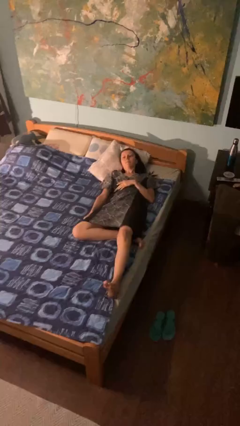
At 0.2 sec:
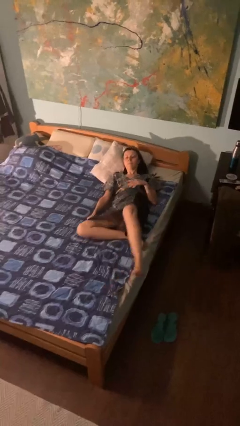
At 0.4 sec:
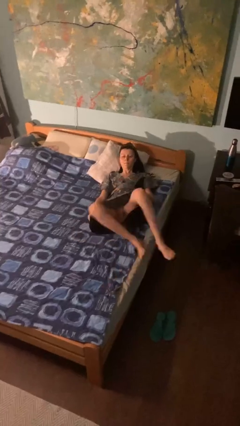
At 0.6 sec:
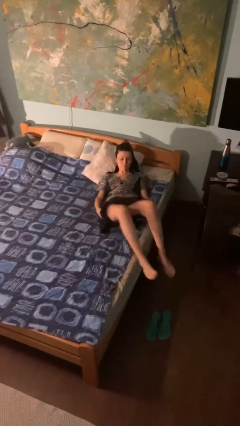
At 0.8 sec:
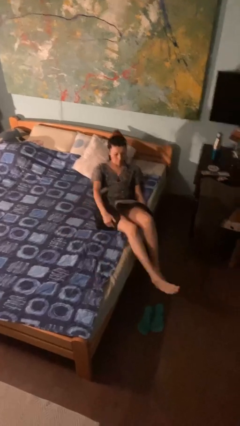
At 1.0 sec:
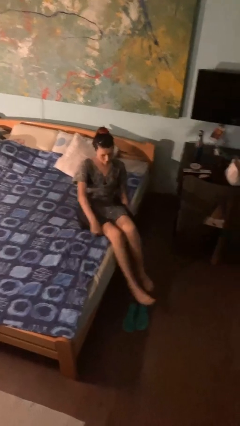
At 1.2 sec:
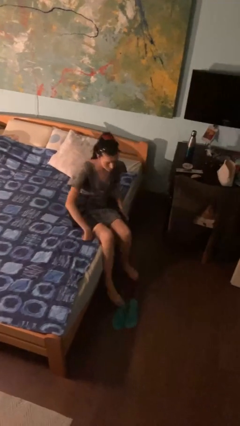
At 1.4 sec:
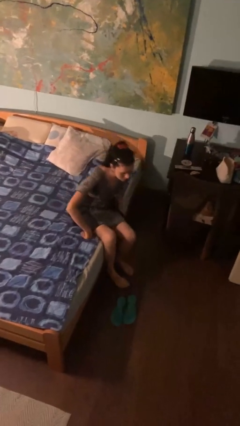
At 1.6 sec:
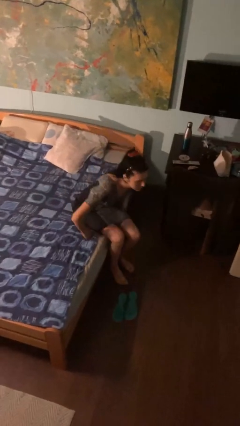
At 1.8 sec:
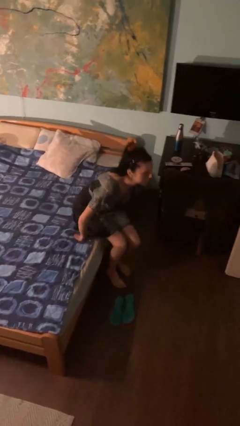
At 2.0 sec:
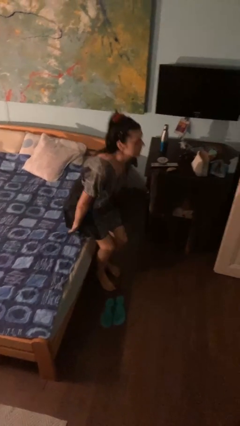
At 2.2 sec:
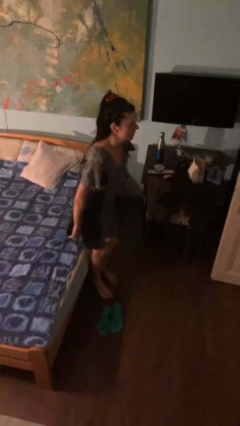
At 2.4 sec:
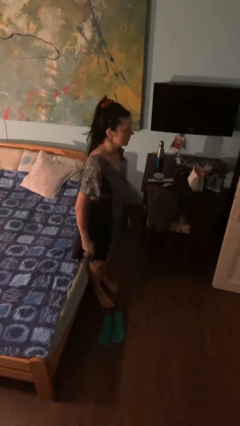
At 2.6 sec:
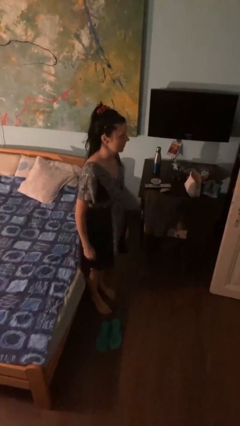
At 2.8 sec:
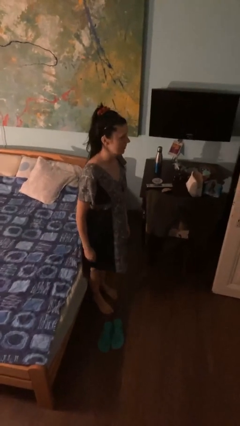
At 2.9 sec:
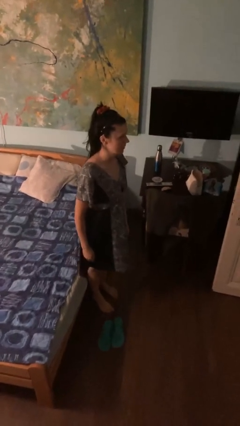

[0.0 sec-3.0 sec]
person stands up

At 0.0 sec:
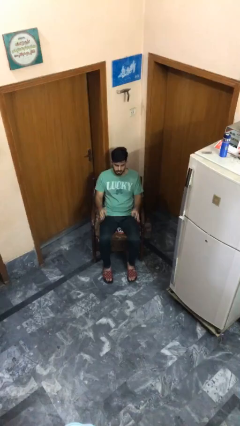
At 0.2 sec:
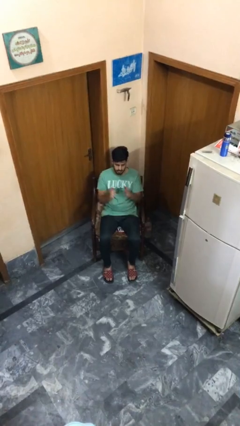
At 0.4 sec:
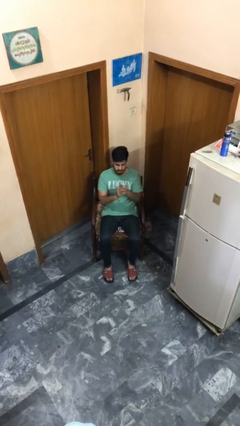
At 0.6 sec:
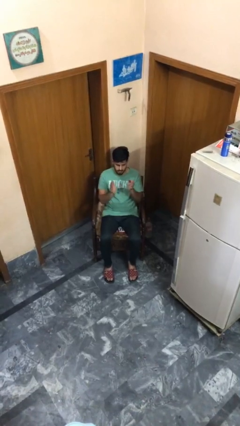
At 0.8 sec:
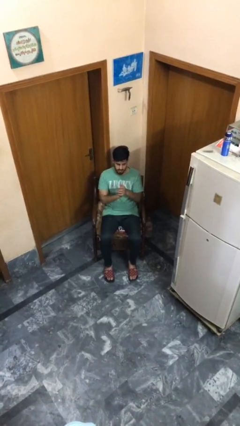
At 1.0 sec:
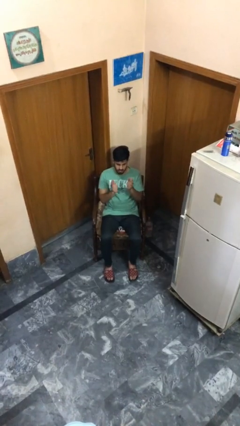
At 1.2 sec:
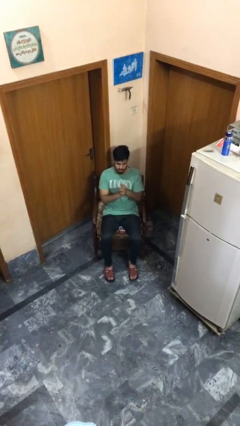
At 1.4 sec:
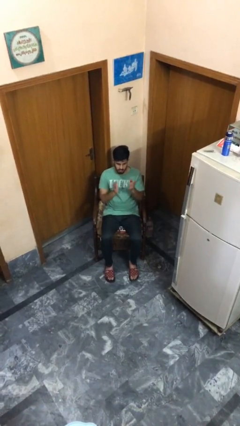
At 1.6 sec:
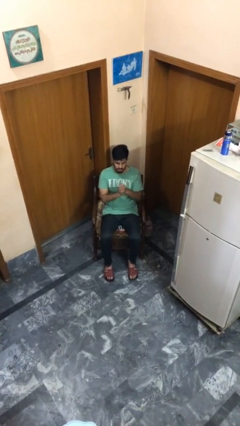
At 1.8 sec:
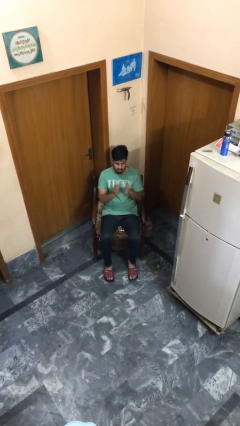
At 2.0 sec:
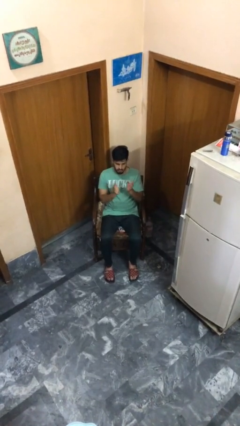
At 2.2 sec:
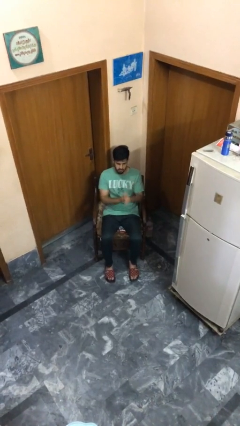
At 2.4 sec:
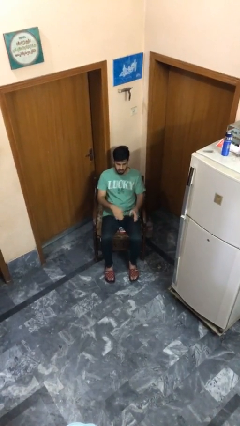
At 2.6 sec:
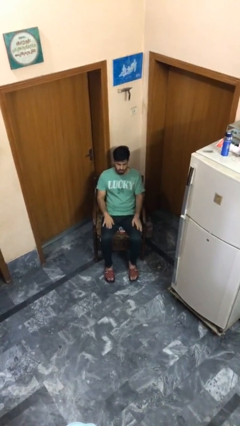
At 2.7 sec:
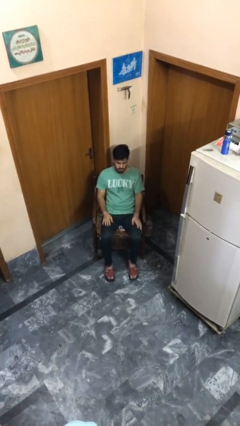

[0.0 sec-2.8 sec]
person claps hands

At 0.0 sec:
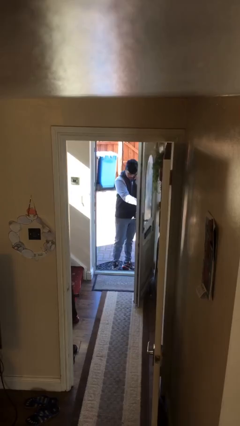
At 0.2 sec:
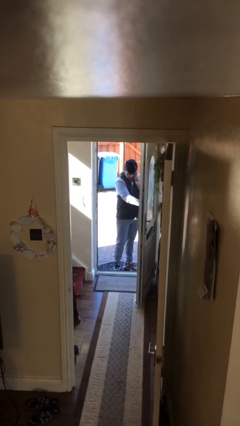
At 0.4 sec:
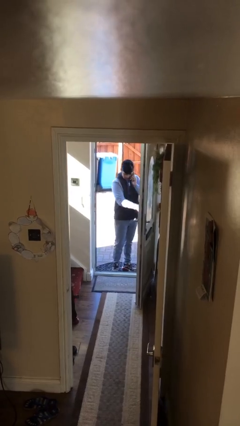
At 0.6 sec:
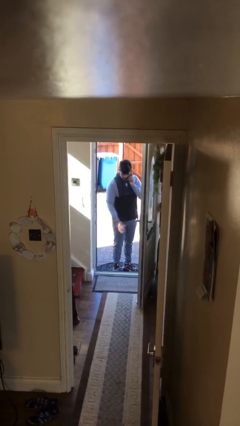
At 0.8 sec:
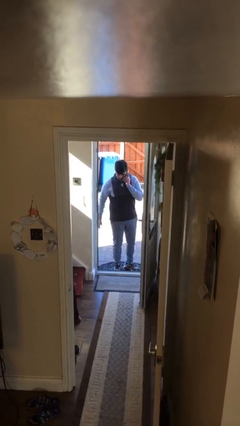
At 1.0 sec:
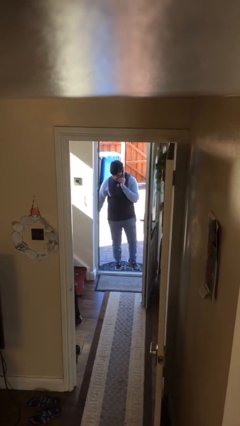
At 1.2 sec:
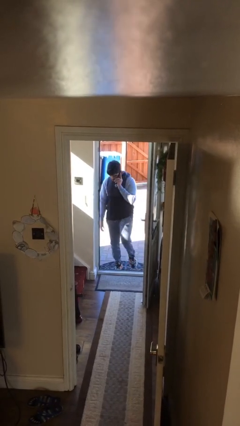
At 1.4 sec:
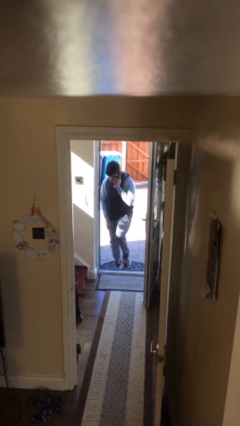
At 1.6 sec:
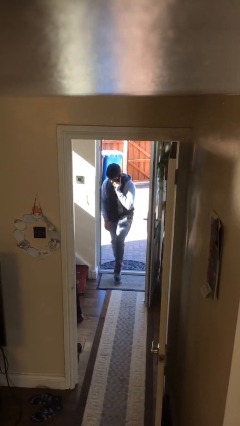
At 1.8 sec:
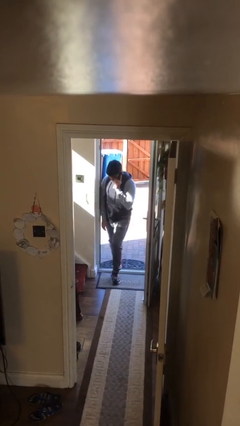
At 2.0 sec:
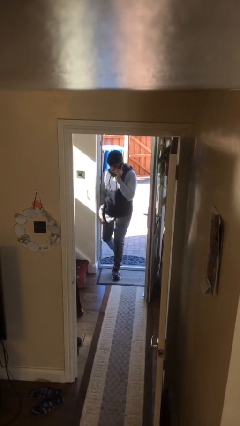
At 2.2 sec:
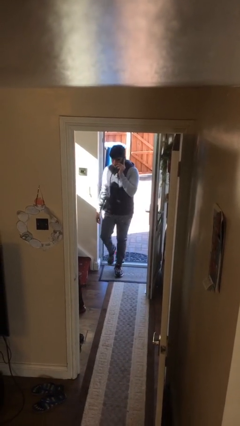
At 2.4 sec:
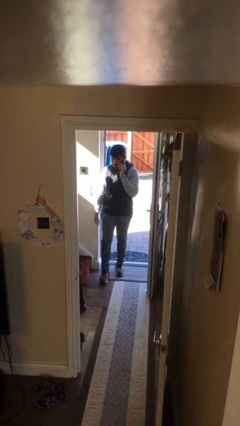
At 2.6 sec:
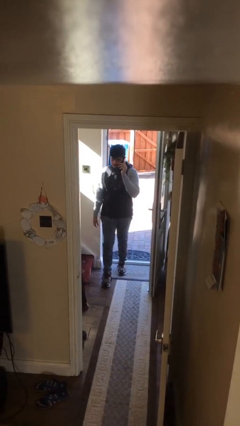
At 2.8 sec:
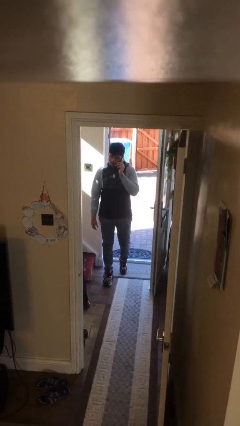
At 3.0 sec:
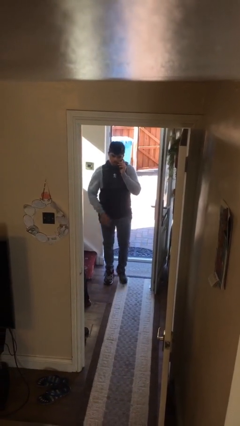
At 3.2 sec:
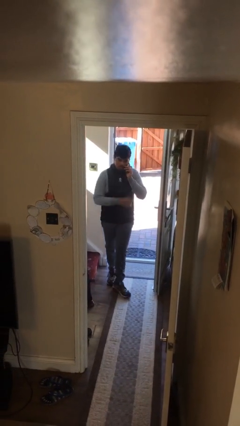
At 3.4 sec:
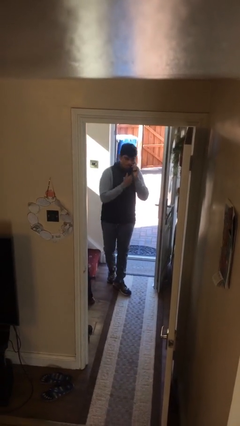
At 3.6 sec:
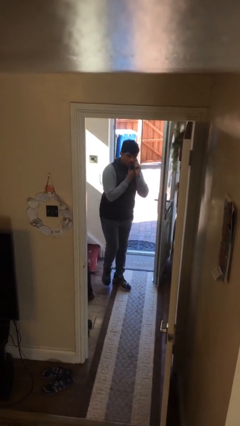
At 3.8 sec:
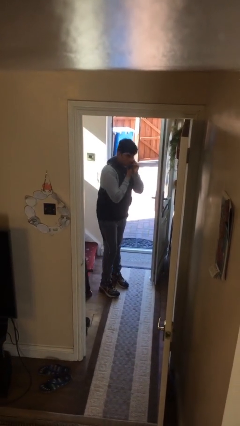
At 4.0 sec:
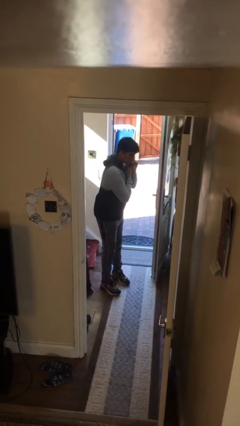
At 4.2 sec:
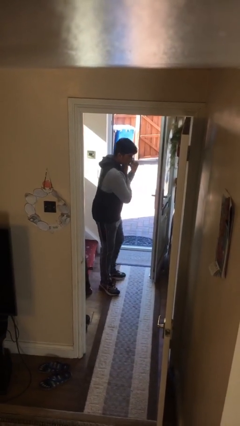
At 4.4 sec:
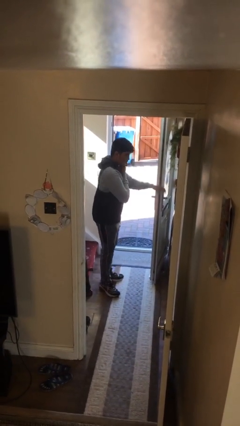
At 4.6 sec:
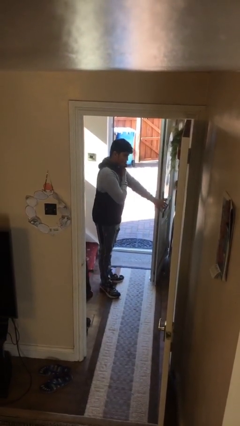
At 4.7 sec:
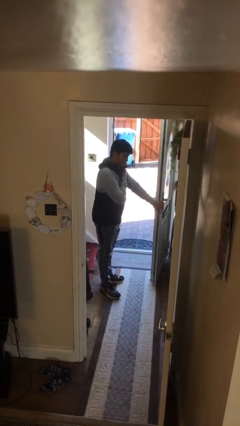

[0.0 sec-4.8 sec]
person enters scene through structure

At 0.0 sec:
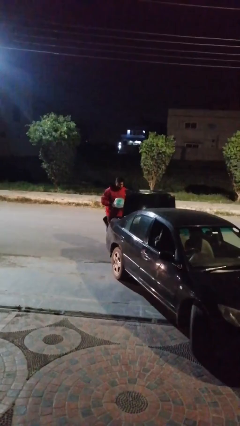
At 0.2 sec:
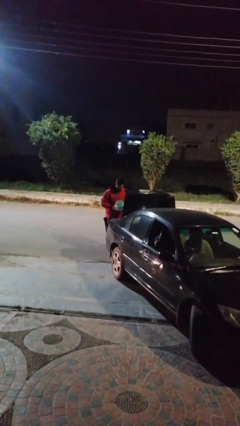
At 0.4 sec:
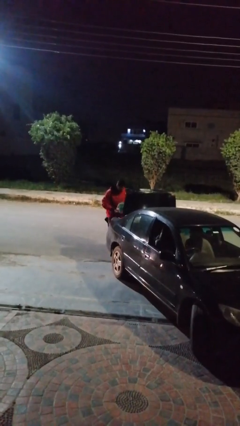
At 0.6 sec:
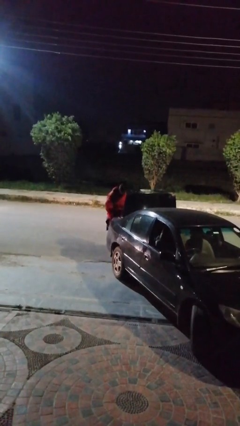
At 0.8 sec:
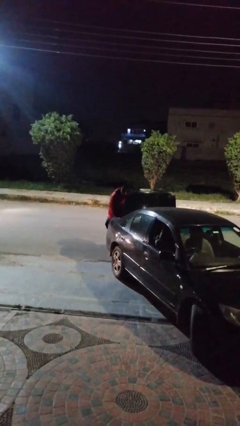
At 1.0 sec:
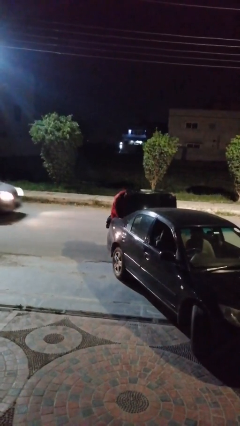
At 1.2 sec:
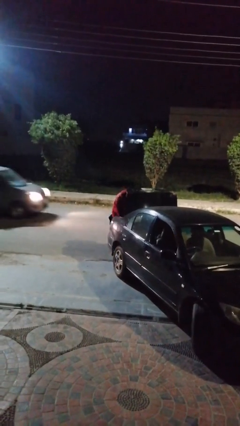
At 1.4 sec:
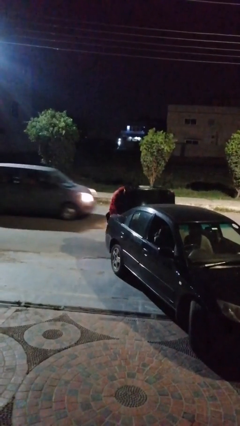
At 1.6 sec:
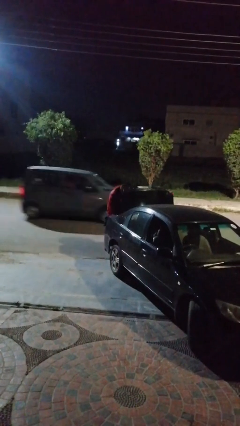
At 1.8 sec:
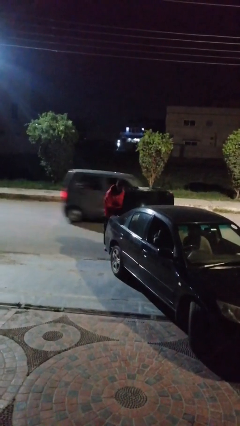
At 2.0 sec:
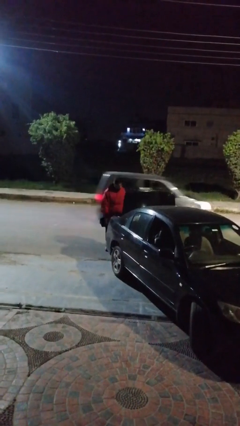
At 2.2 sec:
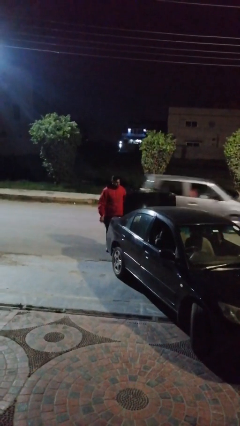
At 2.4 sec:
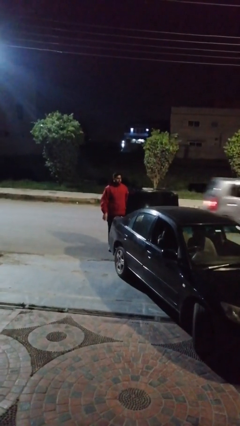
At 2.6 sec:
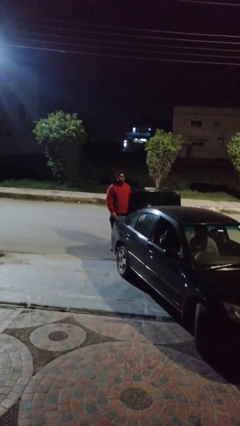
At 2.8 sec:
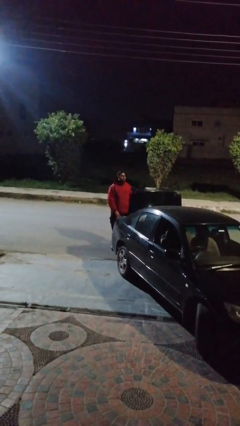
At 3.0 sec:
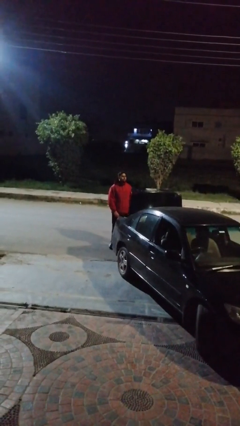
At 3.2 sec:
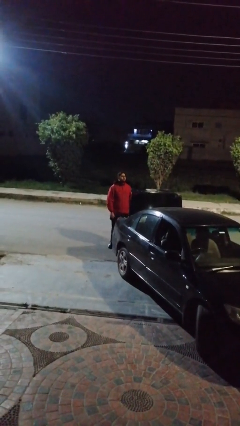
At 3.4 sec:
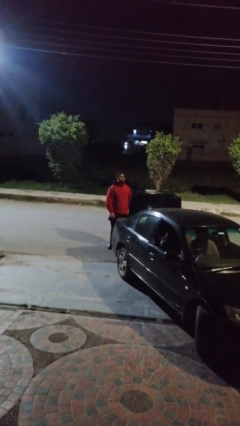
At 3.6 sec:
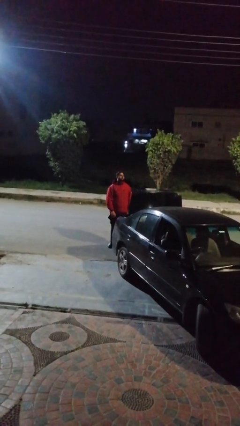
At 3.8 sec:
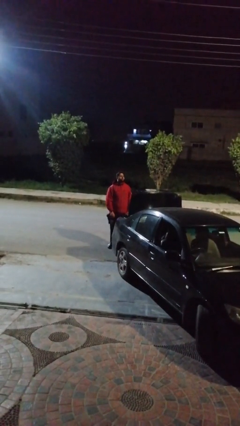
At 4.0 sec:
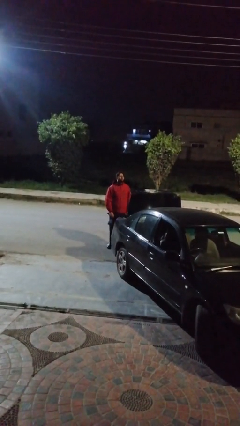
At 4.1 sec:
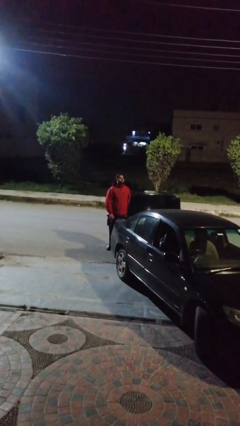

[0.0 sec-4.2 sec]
person loads car

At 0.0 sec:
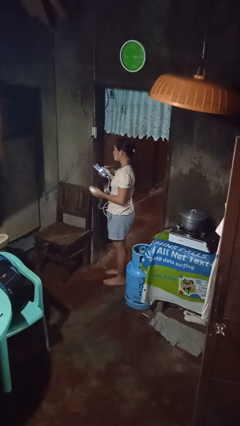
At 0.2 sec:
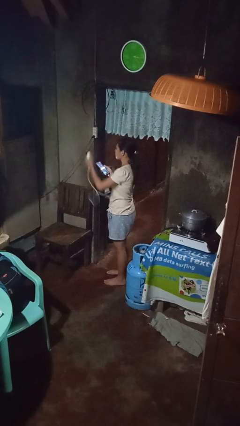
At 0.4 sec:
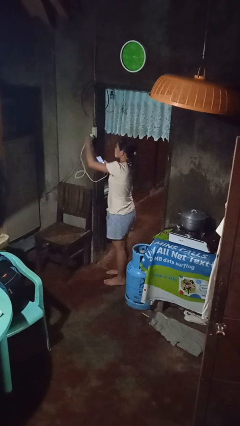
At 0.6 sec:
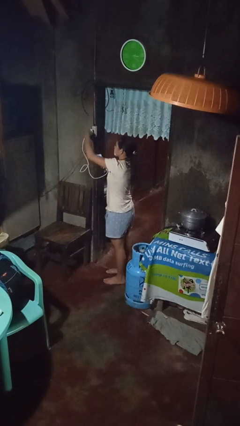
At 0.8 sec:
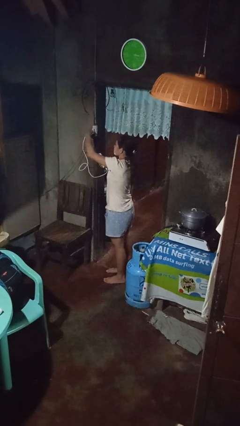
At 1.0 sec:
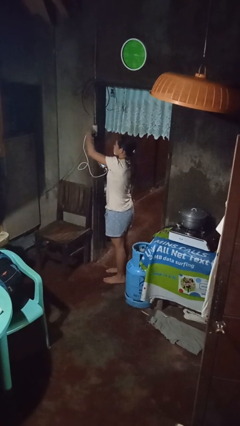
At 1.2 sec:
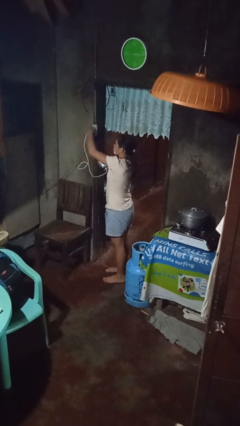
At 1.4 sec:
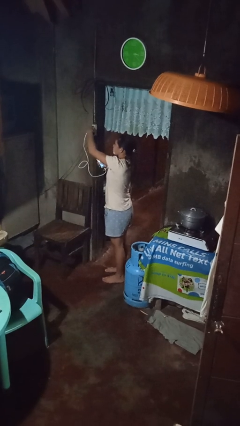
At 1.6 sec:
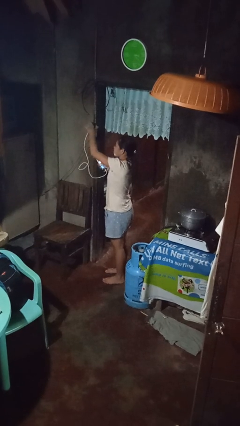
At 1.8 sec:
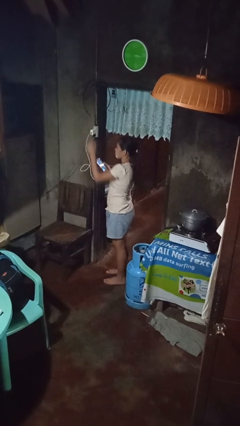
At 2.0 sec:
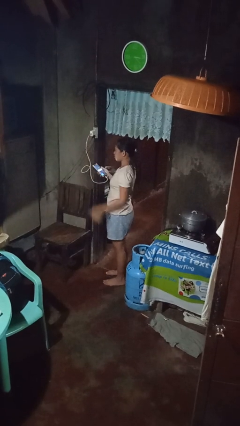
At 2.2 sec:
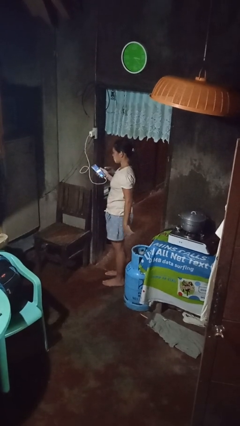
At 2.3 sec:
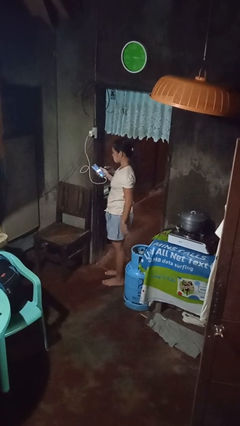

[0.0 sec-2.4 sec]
person plugs into electrical socket
